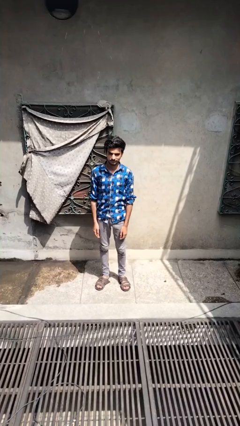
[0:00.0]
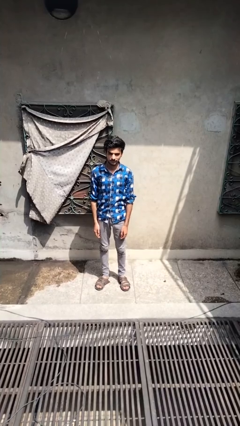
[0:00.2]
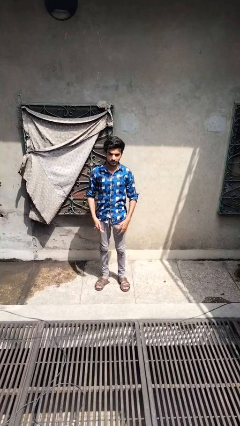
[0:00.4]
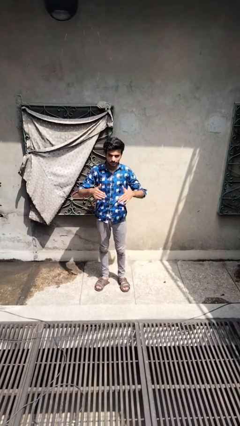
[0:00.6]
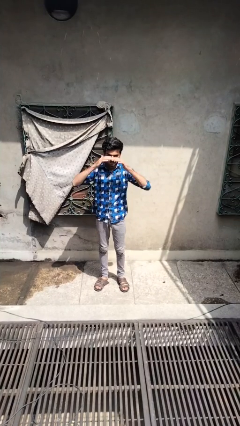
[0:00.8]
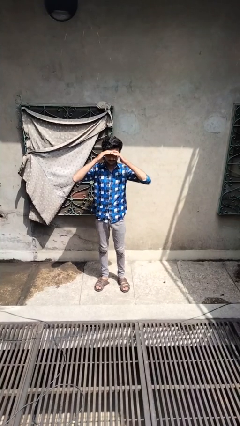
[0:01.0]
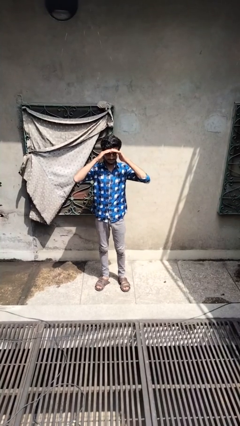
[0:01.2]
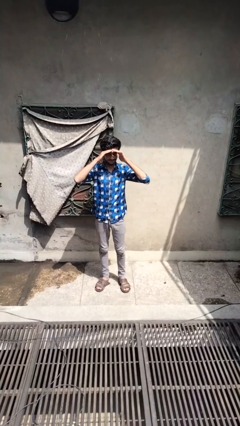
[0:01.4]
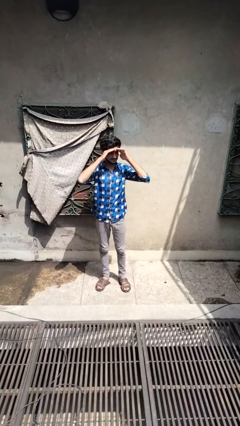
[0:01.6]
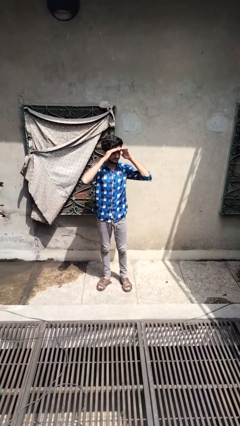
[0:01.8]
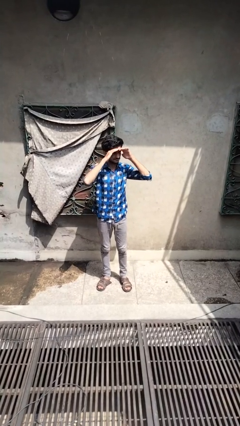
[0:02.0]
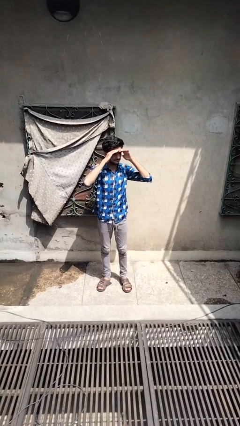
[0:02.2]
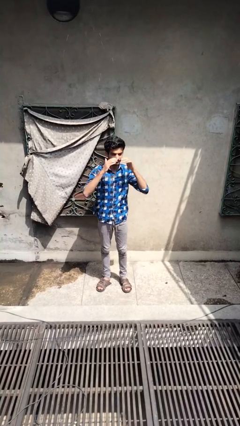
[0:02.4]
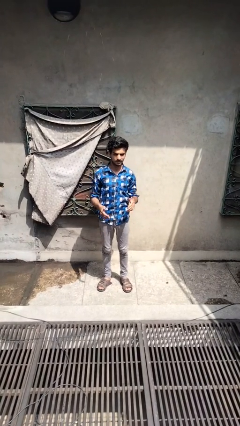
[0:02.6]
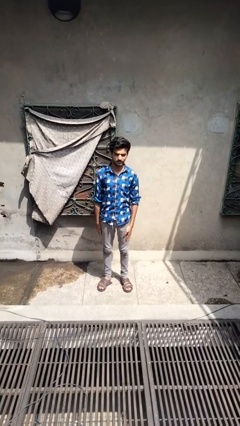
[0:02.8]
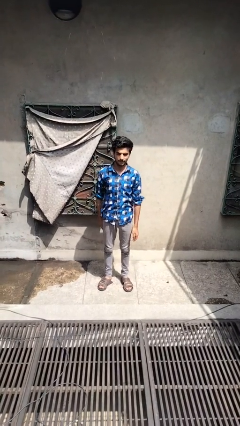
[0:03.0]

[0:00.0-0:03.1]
person shades eyes

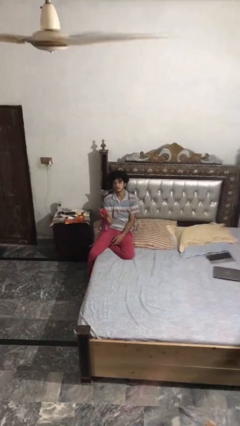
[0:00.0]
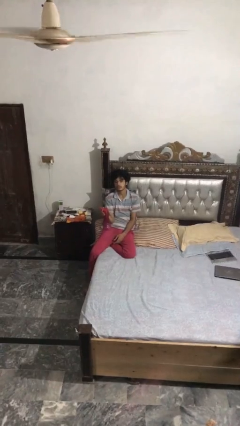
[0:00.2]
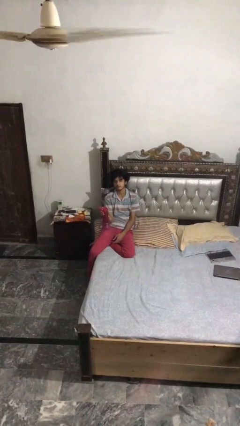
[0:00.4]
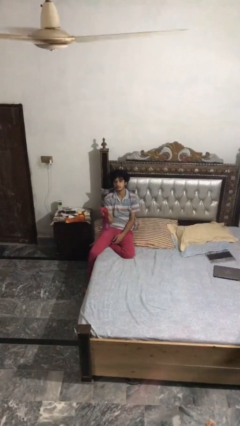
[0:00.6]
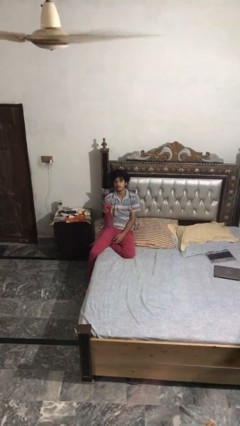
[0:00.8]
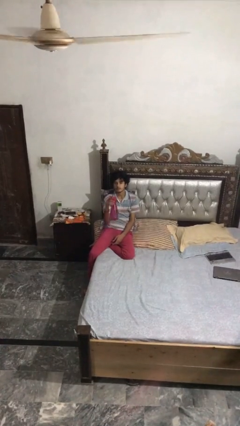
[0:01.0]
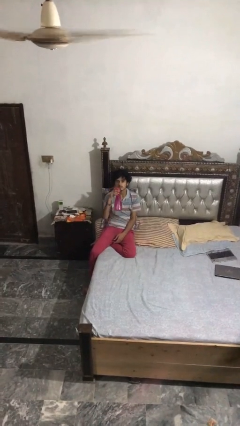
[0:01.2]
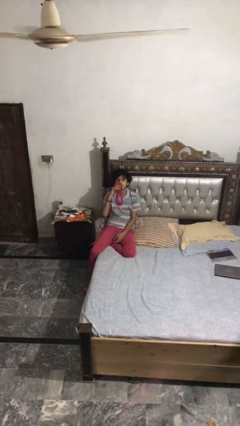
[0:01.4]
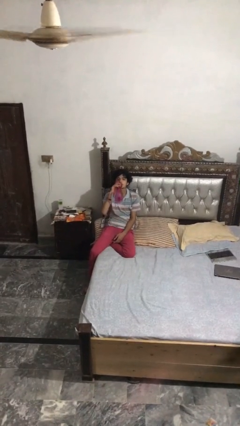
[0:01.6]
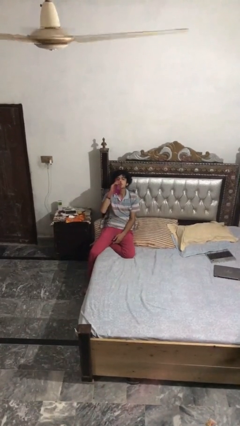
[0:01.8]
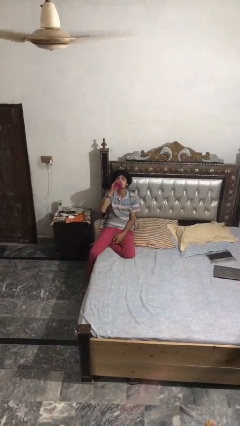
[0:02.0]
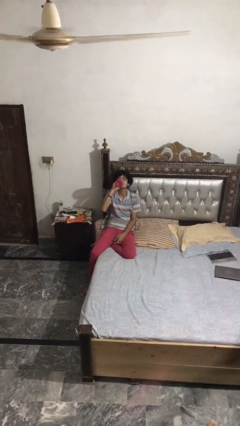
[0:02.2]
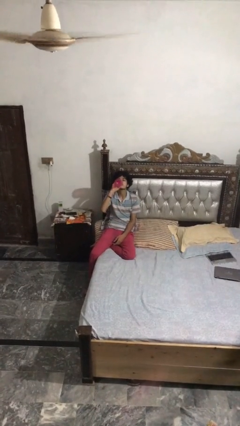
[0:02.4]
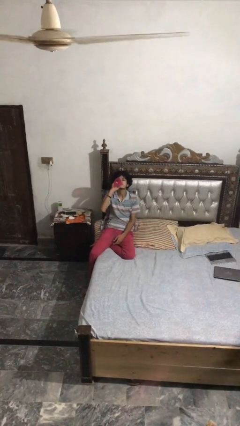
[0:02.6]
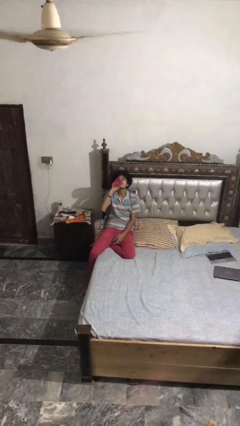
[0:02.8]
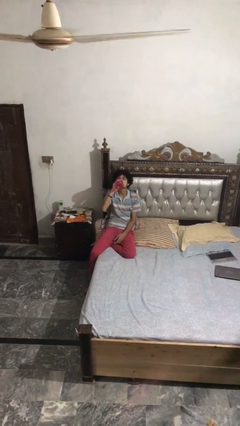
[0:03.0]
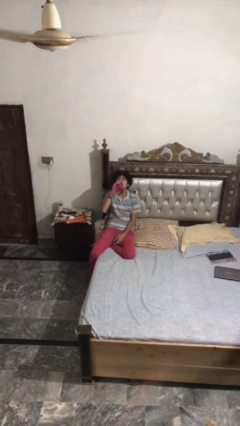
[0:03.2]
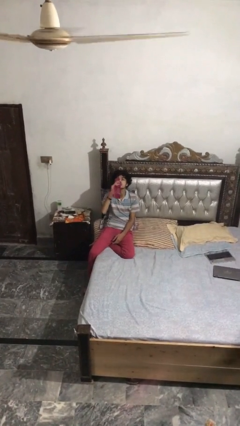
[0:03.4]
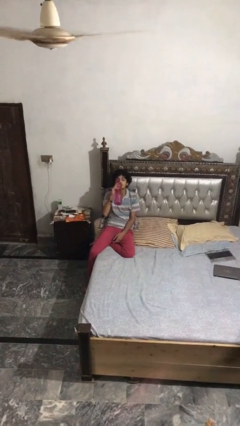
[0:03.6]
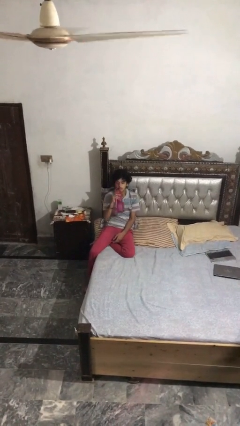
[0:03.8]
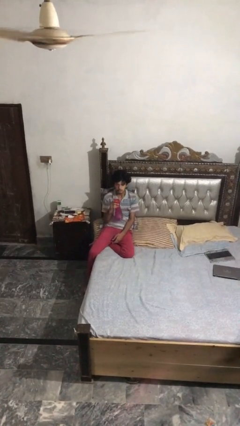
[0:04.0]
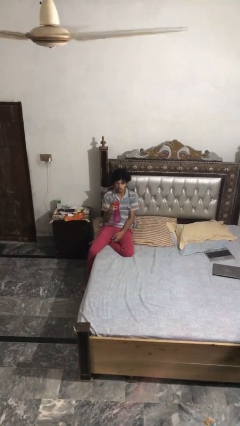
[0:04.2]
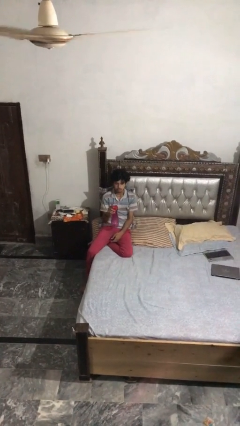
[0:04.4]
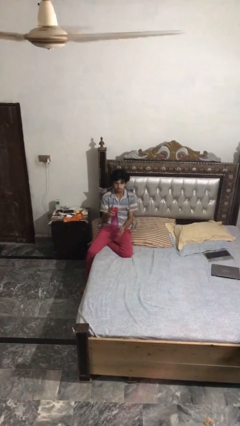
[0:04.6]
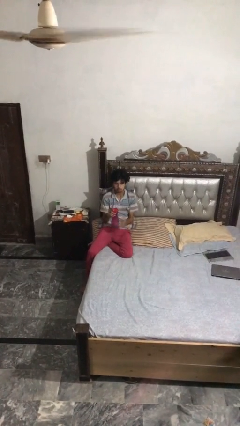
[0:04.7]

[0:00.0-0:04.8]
person drinks from bottle

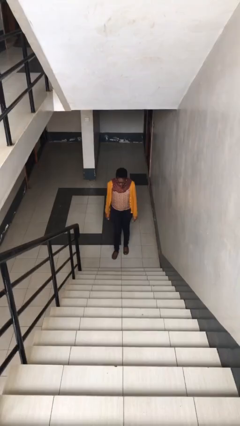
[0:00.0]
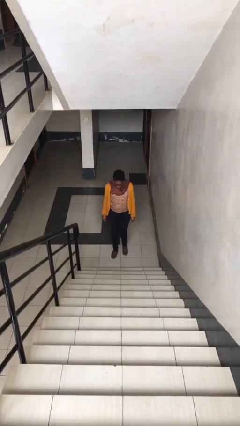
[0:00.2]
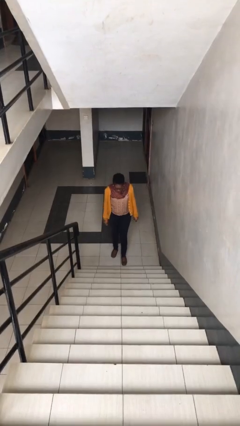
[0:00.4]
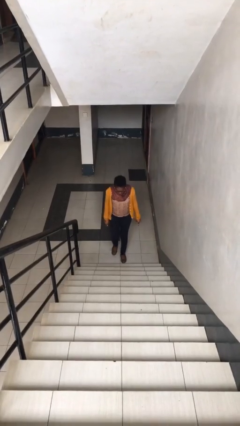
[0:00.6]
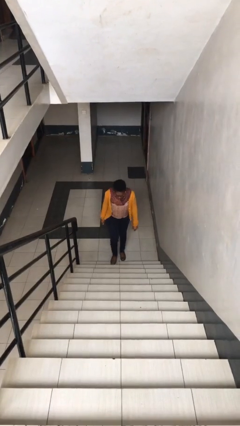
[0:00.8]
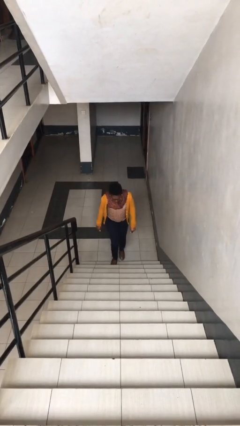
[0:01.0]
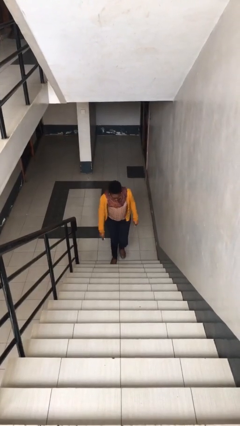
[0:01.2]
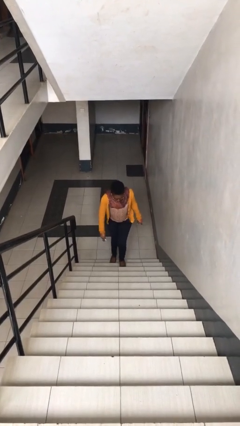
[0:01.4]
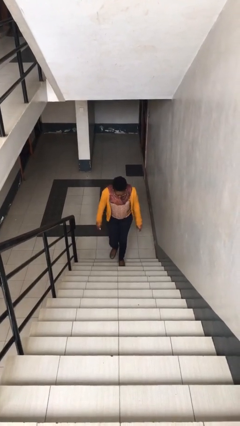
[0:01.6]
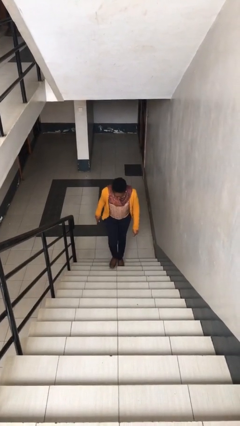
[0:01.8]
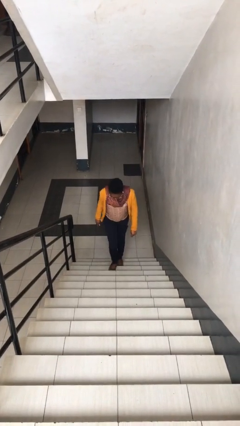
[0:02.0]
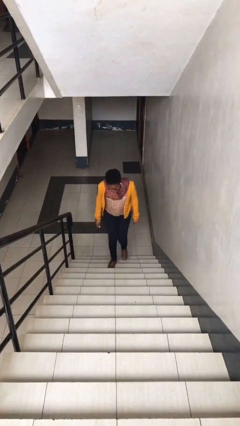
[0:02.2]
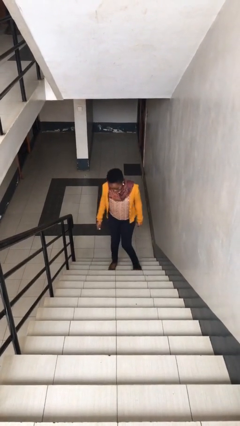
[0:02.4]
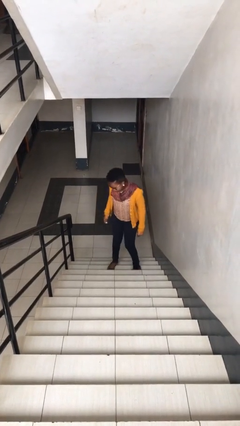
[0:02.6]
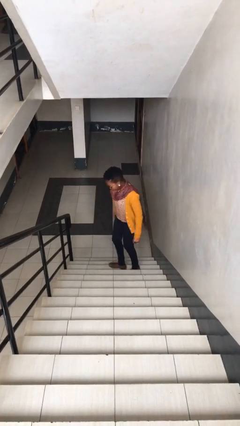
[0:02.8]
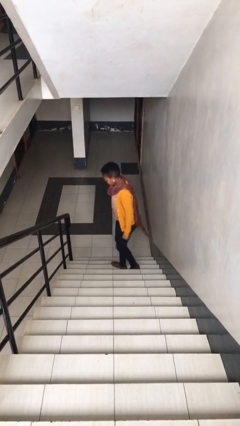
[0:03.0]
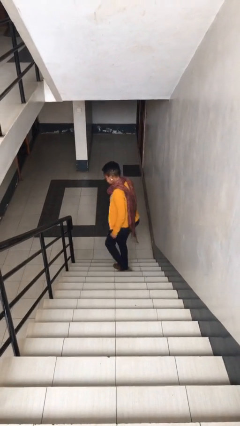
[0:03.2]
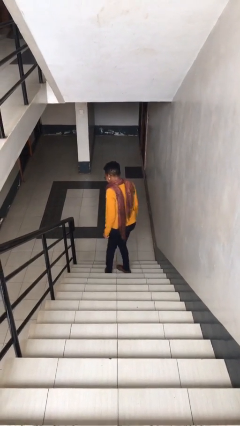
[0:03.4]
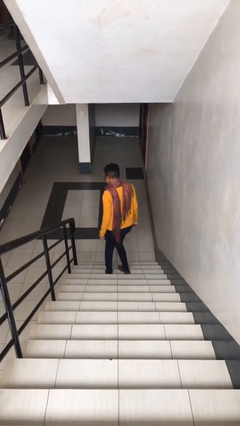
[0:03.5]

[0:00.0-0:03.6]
person climbs up stairs

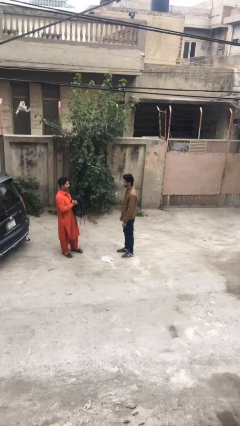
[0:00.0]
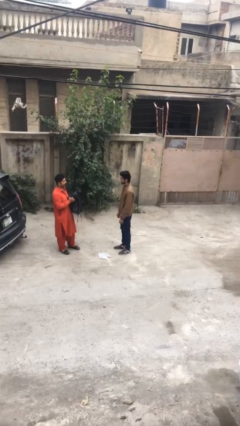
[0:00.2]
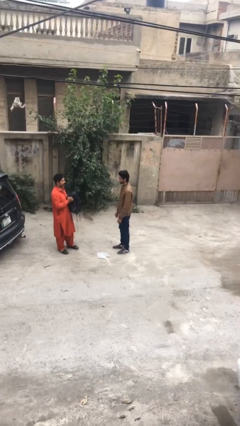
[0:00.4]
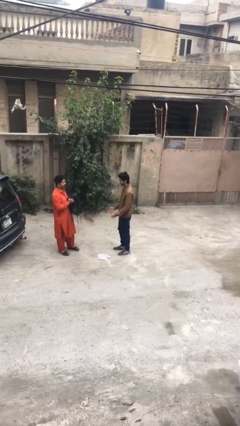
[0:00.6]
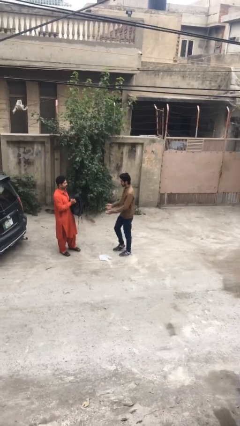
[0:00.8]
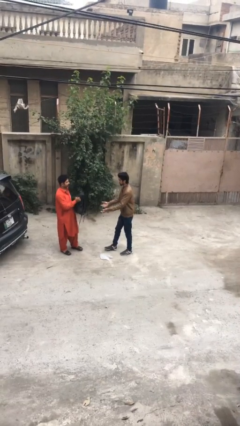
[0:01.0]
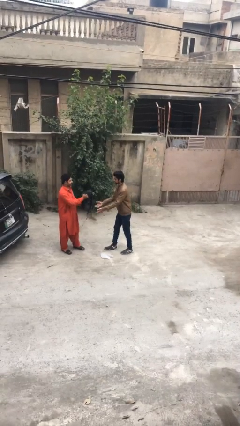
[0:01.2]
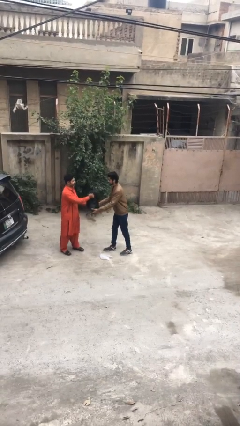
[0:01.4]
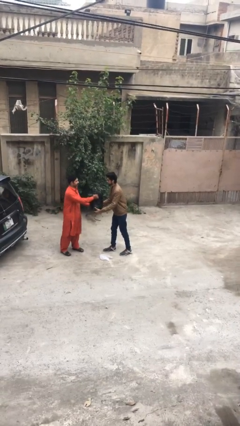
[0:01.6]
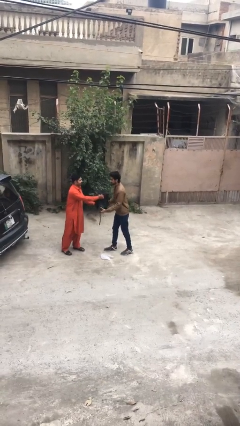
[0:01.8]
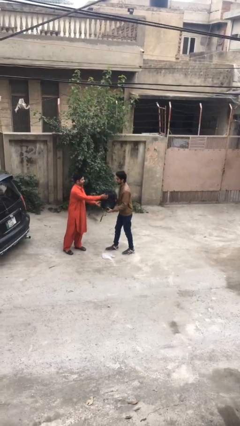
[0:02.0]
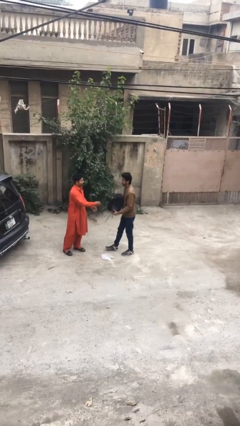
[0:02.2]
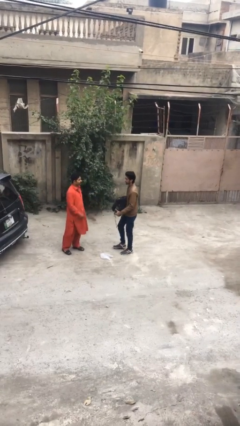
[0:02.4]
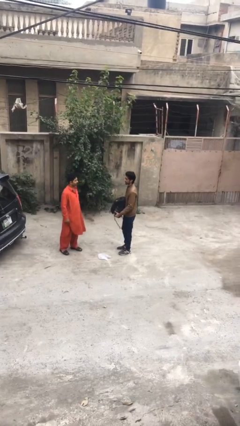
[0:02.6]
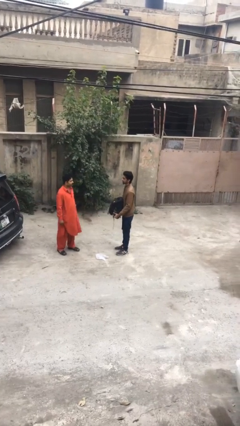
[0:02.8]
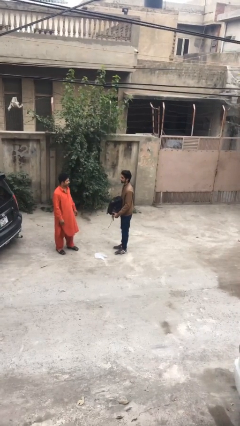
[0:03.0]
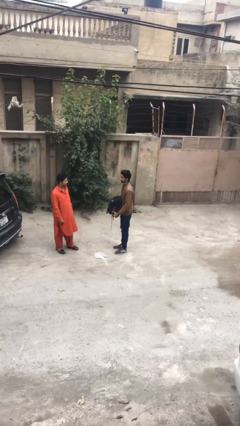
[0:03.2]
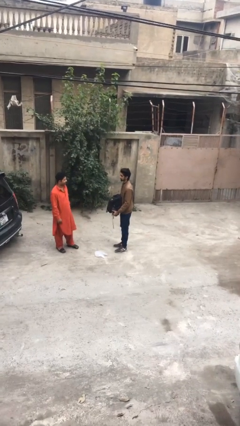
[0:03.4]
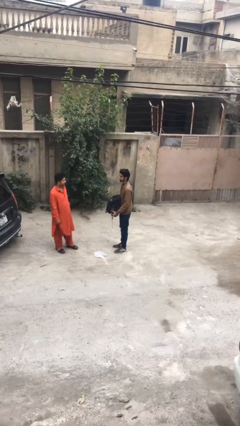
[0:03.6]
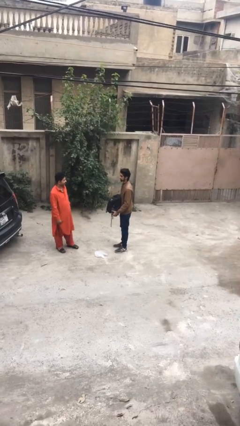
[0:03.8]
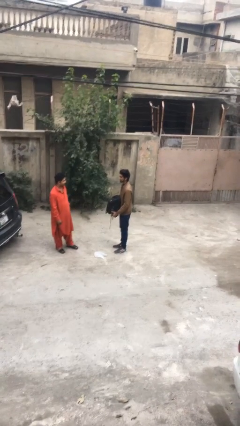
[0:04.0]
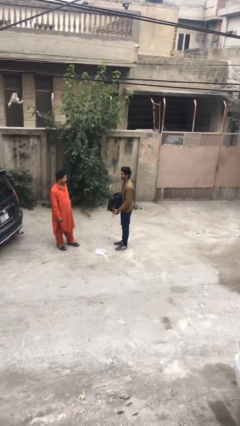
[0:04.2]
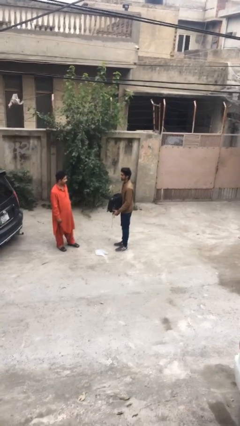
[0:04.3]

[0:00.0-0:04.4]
person transfers object to person

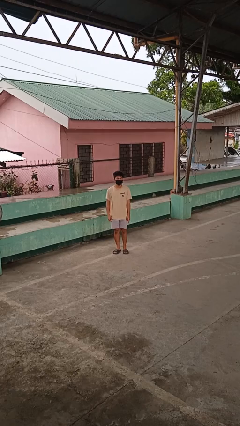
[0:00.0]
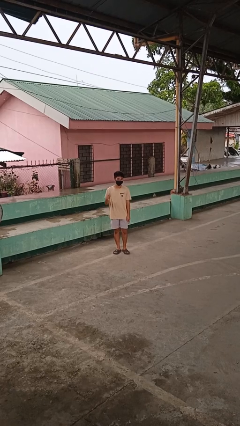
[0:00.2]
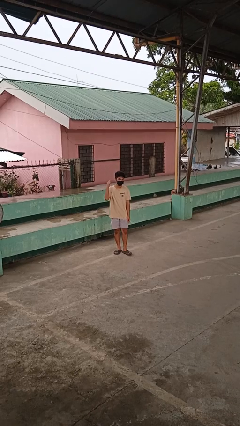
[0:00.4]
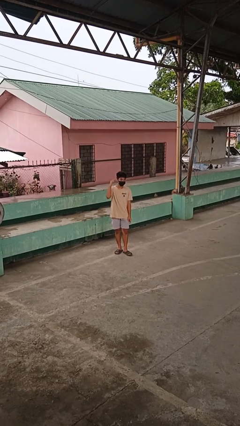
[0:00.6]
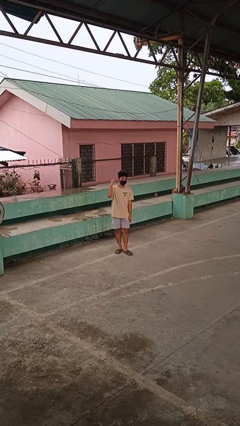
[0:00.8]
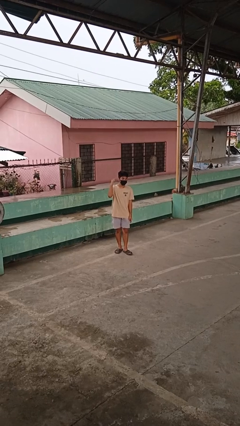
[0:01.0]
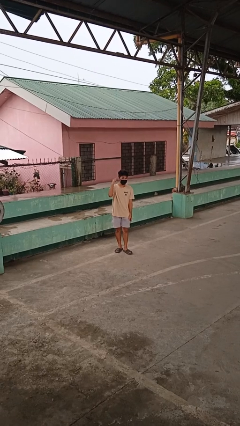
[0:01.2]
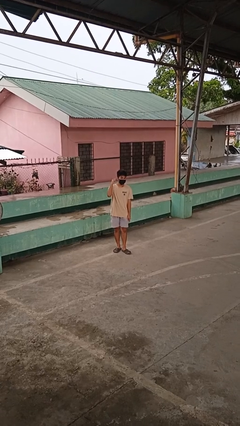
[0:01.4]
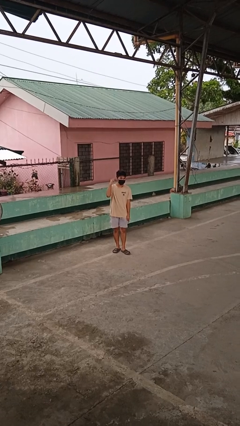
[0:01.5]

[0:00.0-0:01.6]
person gestures listen closely

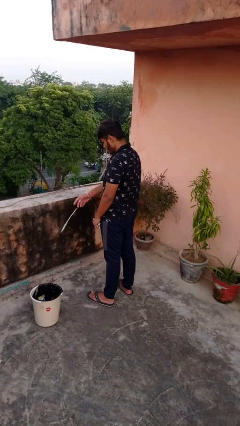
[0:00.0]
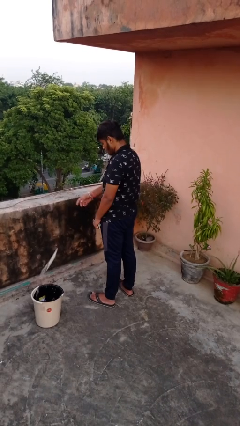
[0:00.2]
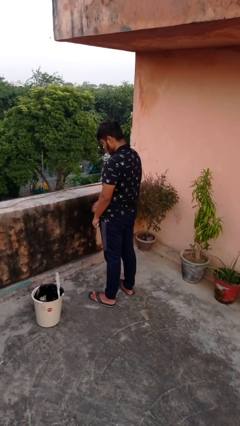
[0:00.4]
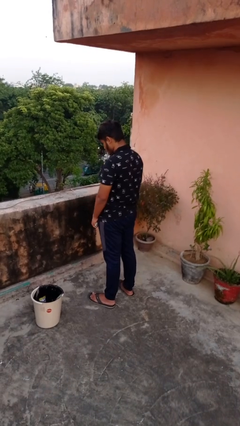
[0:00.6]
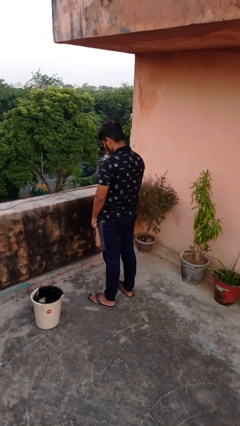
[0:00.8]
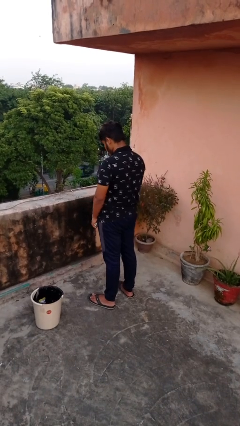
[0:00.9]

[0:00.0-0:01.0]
person discards trash
